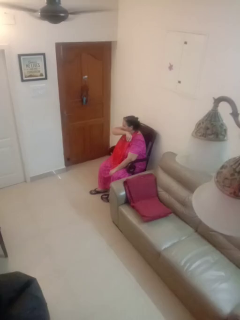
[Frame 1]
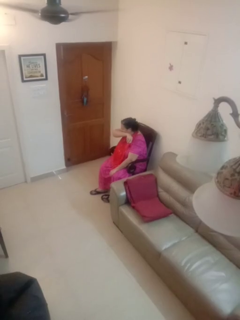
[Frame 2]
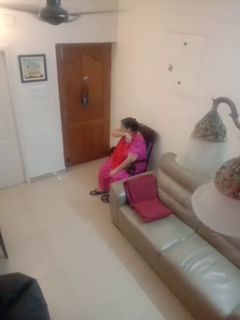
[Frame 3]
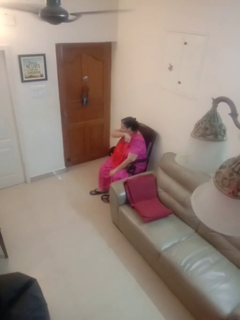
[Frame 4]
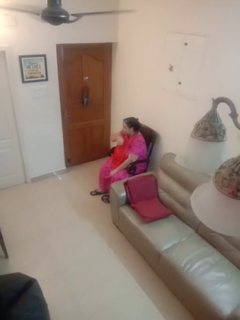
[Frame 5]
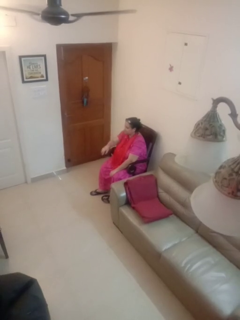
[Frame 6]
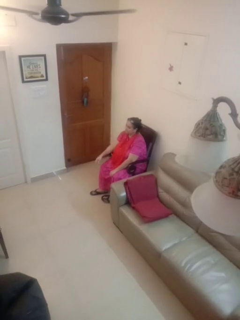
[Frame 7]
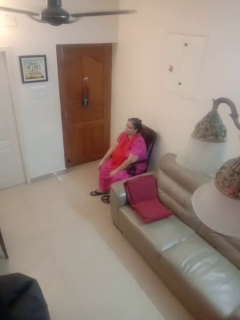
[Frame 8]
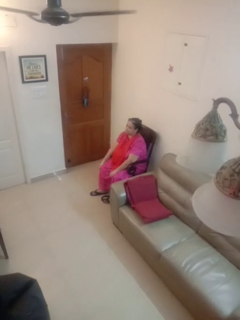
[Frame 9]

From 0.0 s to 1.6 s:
person sneezes into arm

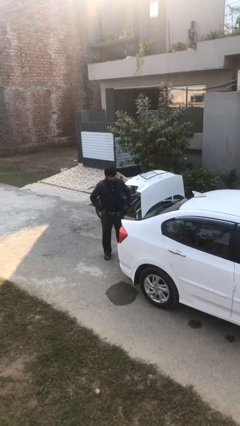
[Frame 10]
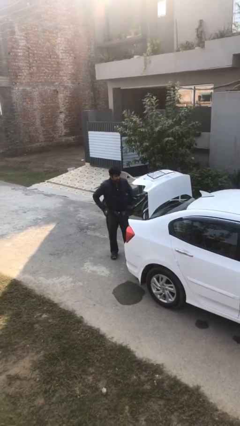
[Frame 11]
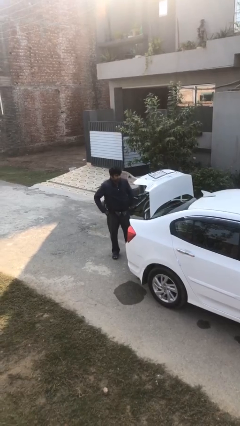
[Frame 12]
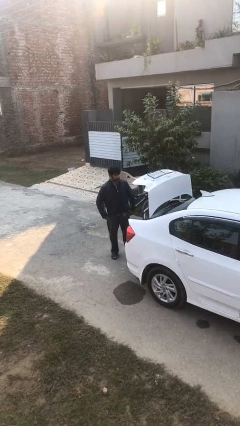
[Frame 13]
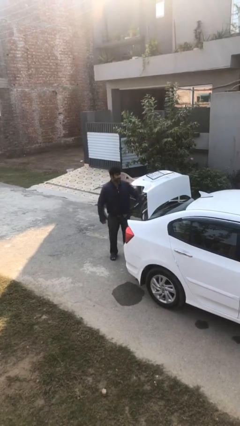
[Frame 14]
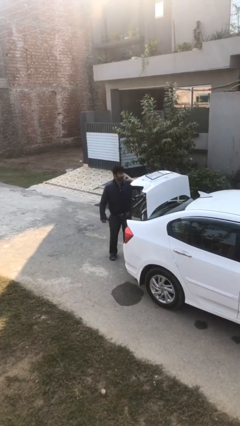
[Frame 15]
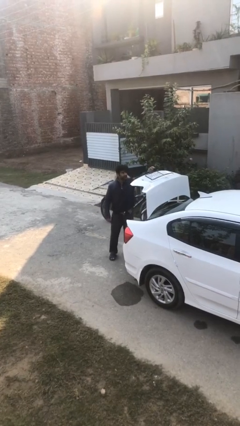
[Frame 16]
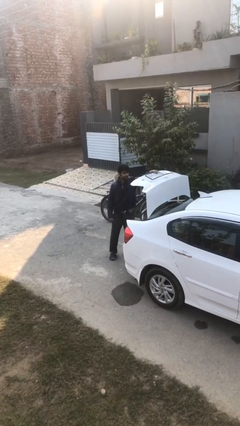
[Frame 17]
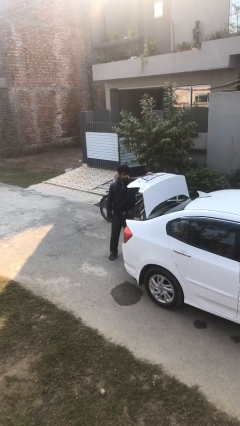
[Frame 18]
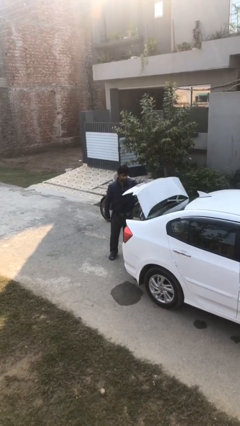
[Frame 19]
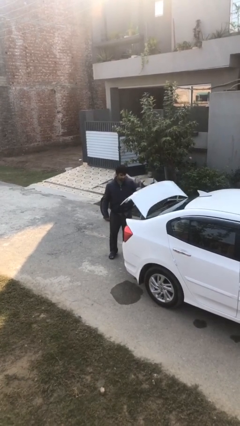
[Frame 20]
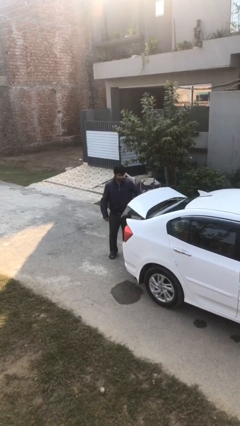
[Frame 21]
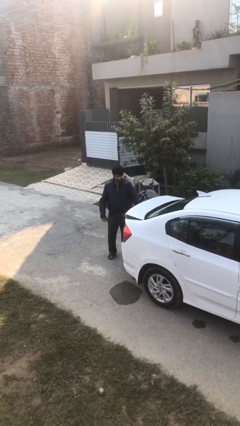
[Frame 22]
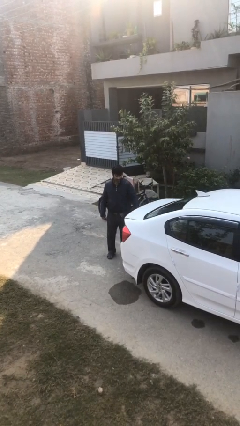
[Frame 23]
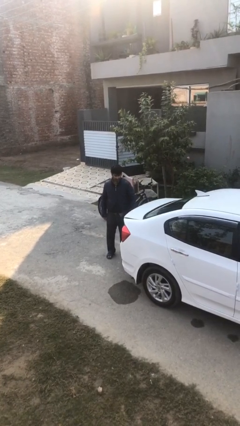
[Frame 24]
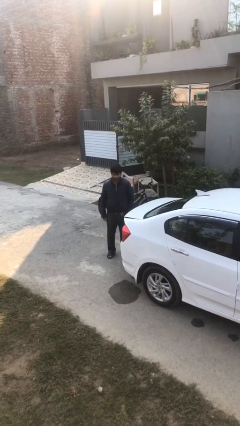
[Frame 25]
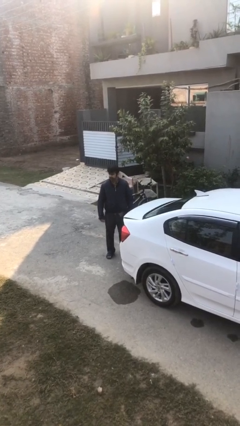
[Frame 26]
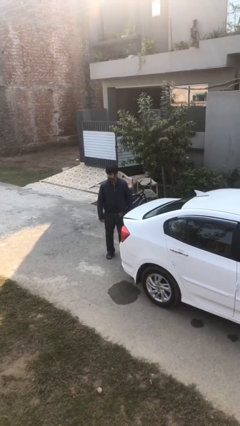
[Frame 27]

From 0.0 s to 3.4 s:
person closes car trunk

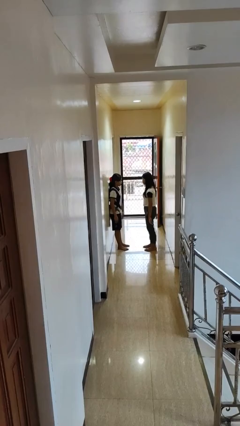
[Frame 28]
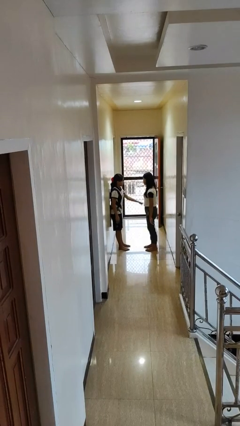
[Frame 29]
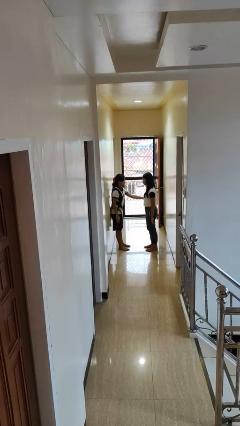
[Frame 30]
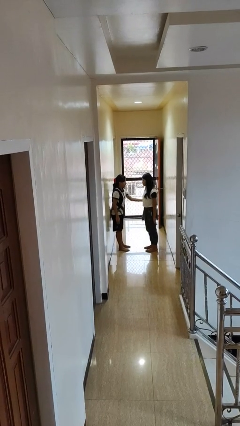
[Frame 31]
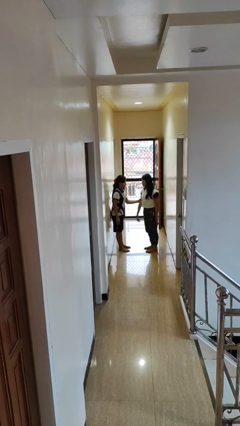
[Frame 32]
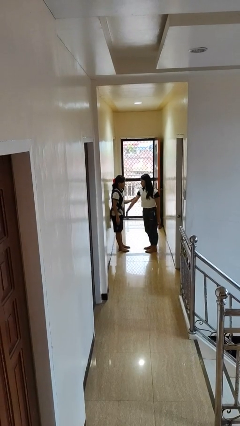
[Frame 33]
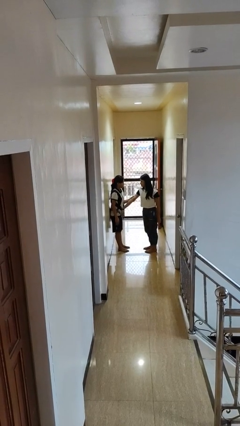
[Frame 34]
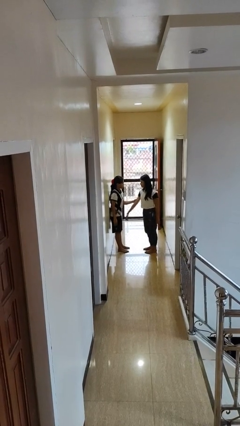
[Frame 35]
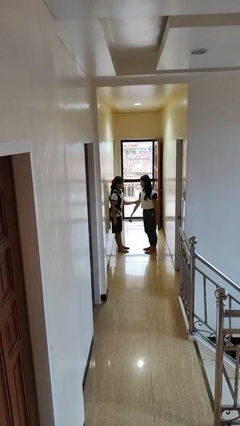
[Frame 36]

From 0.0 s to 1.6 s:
person grabs person by bicep

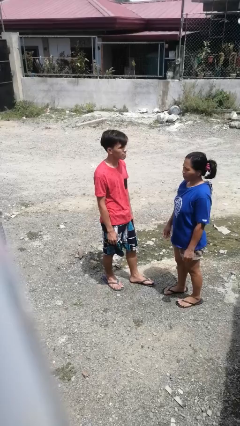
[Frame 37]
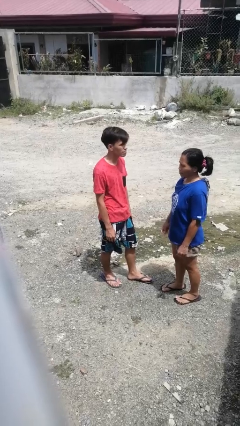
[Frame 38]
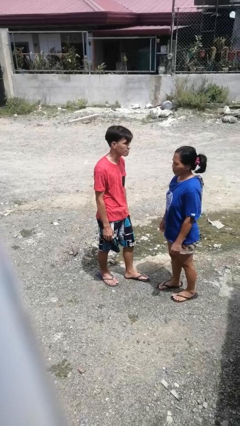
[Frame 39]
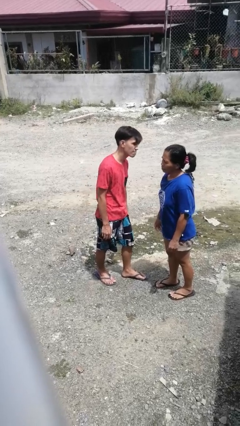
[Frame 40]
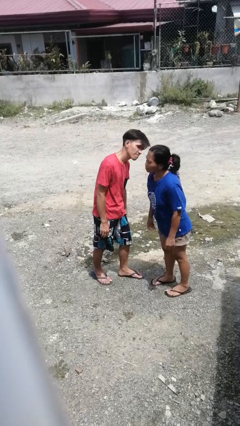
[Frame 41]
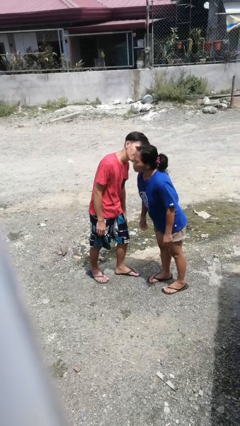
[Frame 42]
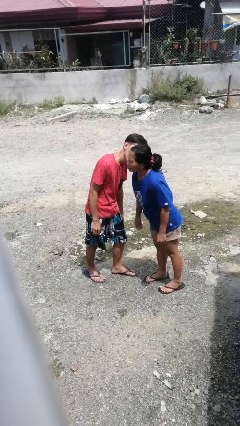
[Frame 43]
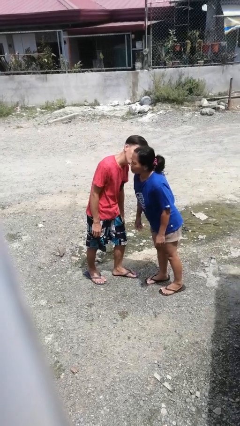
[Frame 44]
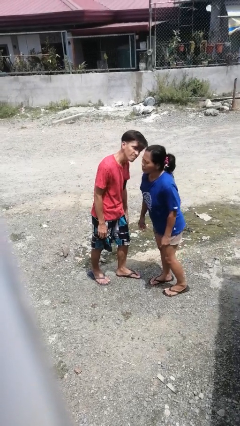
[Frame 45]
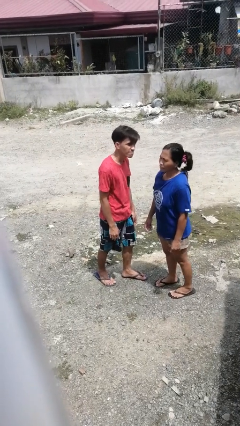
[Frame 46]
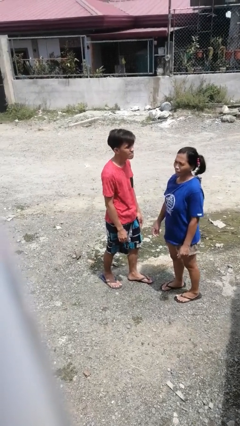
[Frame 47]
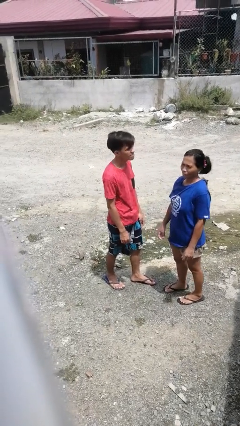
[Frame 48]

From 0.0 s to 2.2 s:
person kisses cheek of person

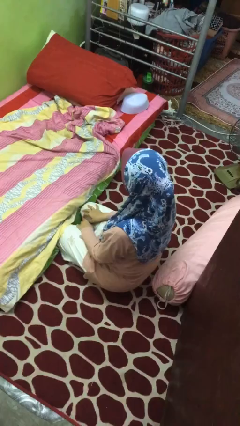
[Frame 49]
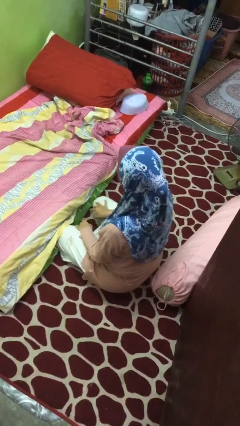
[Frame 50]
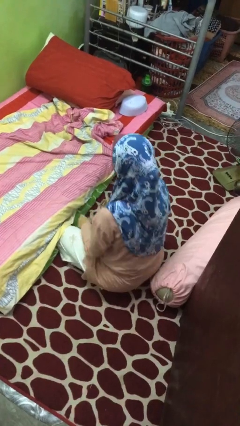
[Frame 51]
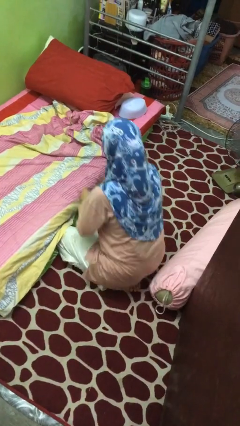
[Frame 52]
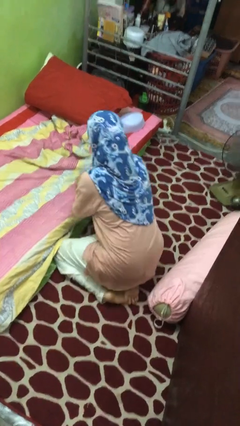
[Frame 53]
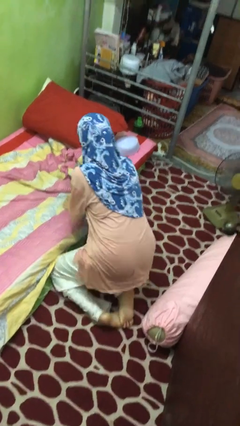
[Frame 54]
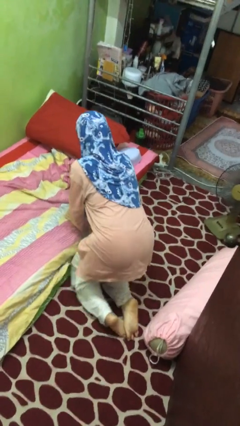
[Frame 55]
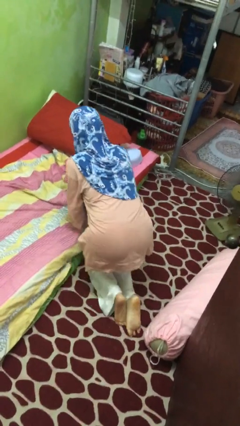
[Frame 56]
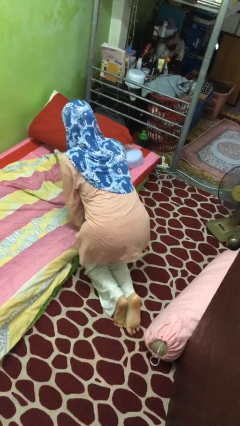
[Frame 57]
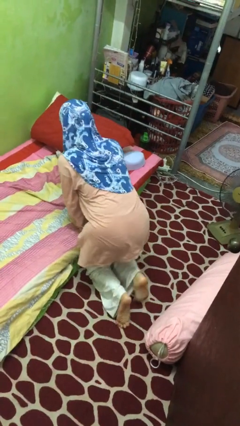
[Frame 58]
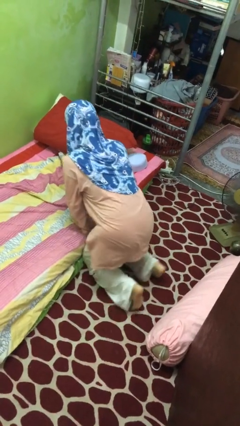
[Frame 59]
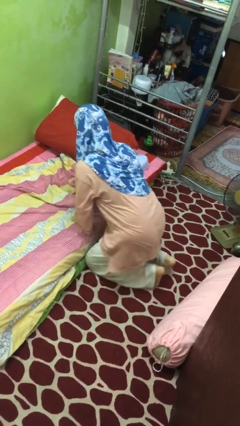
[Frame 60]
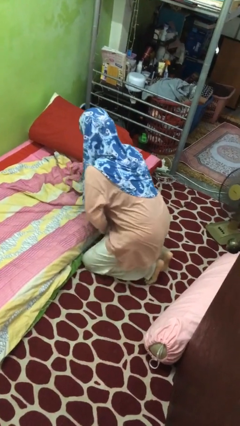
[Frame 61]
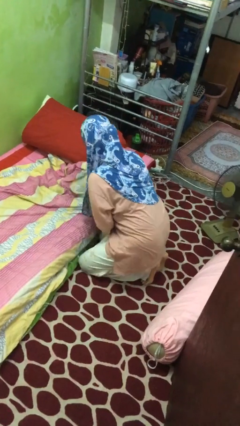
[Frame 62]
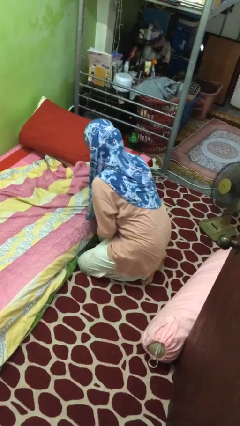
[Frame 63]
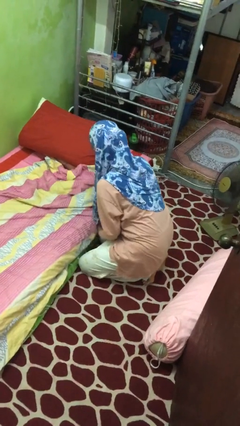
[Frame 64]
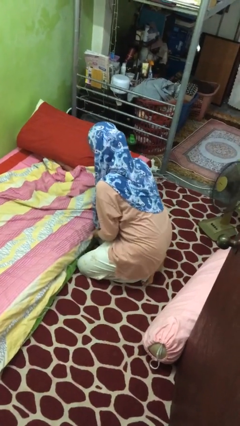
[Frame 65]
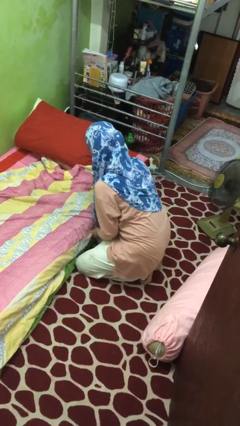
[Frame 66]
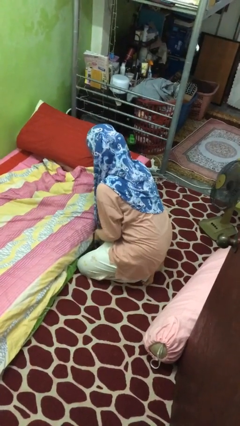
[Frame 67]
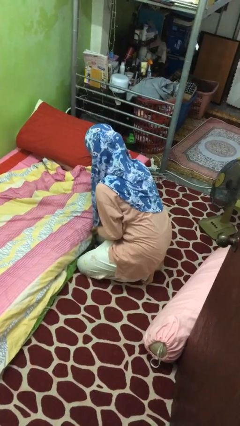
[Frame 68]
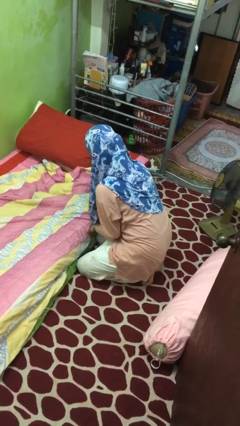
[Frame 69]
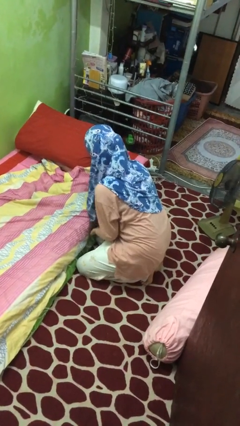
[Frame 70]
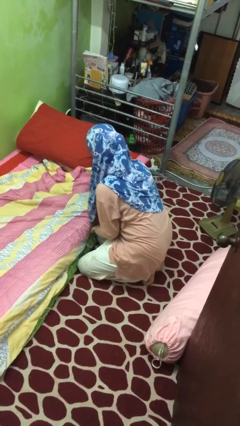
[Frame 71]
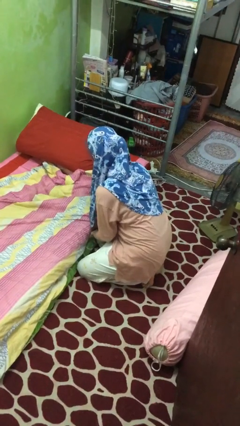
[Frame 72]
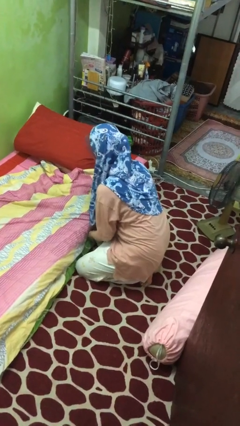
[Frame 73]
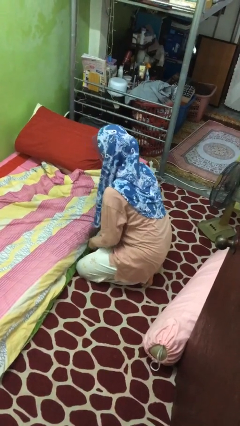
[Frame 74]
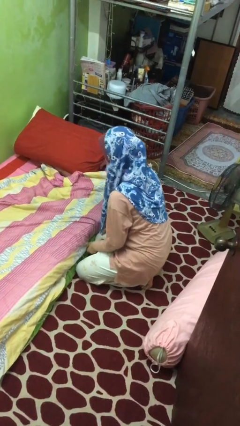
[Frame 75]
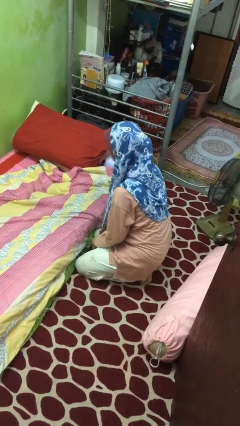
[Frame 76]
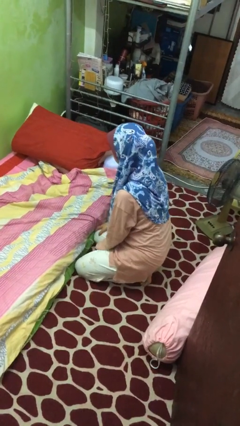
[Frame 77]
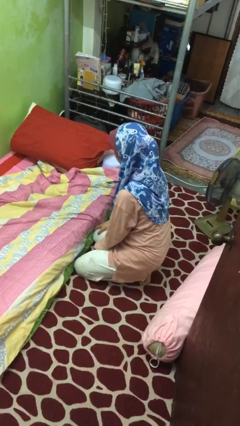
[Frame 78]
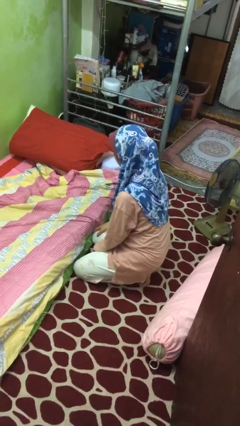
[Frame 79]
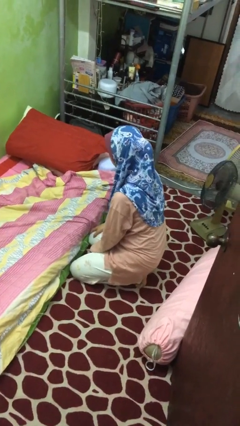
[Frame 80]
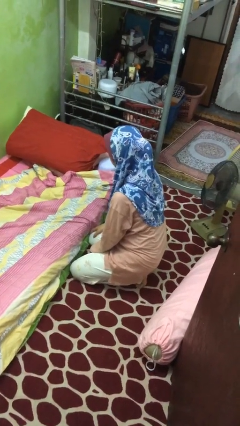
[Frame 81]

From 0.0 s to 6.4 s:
person makes bed

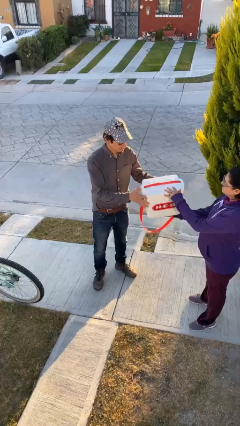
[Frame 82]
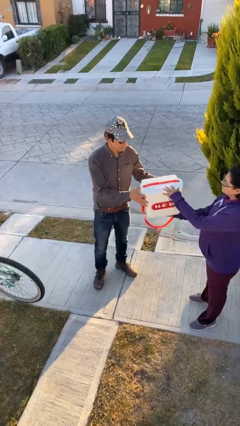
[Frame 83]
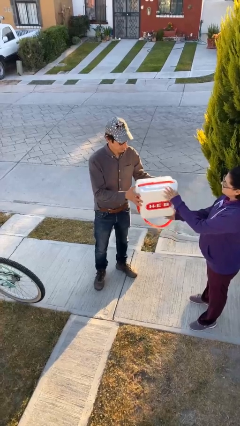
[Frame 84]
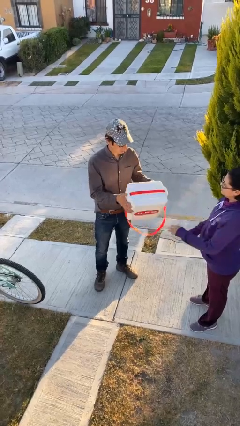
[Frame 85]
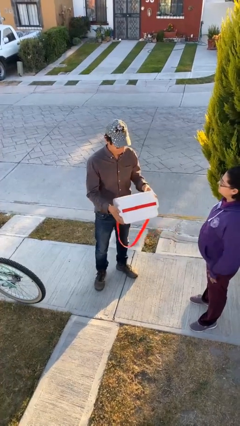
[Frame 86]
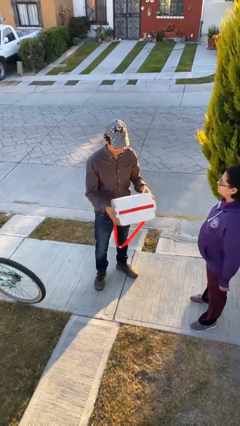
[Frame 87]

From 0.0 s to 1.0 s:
person transfers object to person

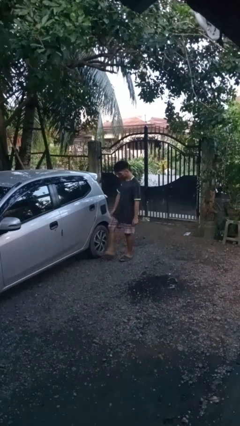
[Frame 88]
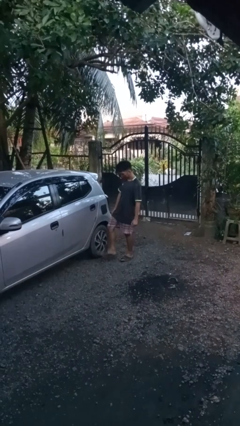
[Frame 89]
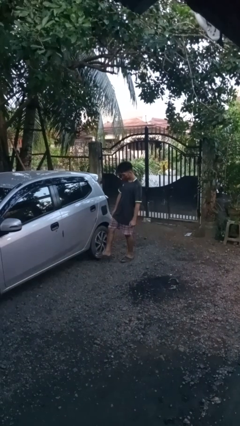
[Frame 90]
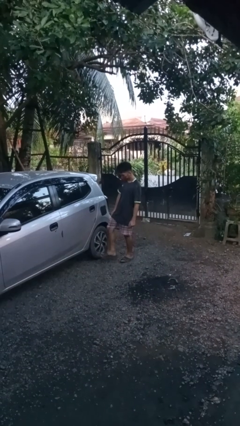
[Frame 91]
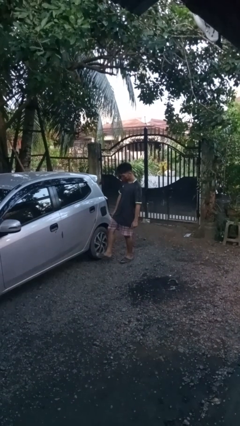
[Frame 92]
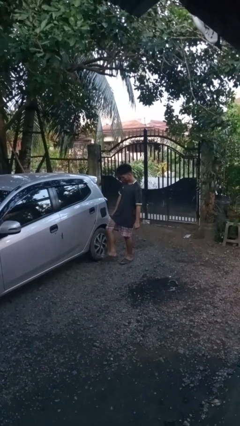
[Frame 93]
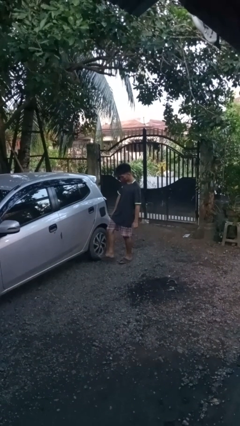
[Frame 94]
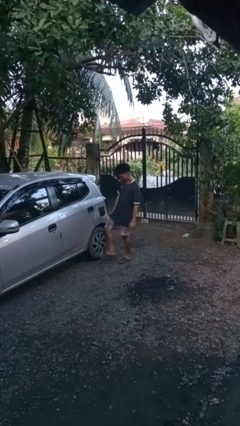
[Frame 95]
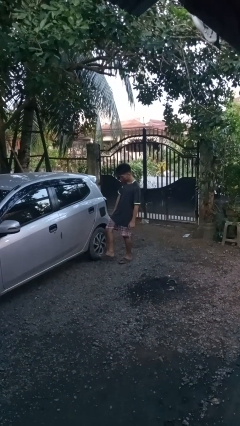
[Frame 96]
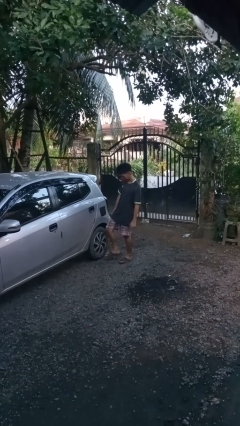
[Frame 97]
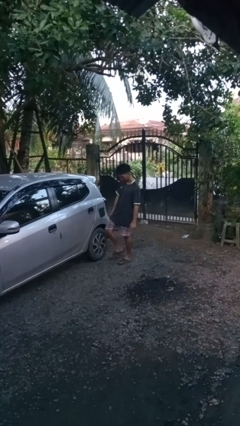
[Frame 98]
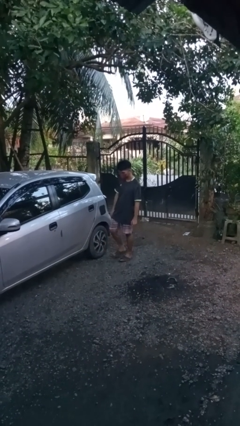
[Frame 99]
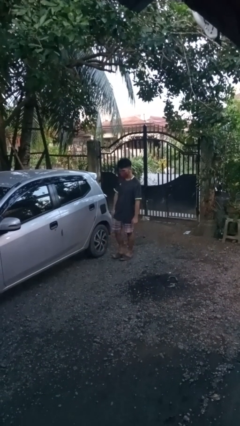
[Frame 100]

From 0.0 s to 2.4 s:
person kicks car tires
